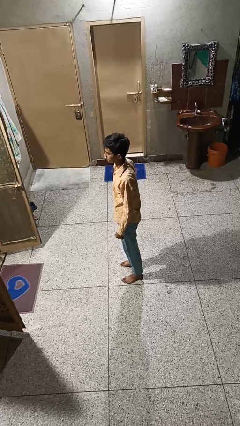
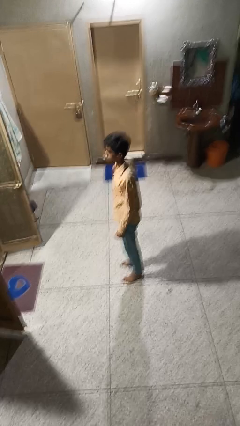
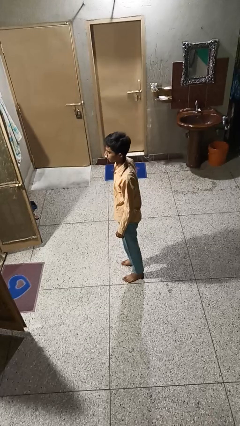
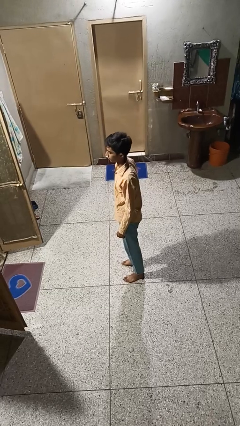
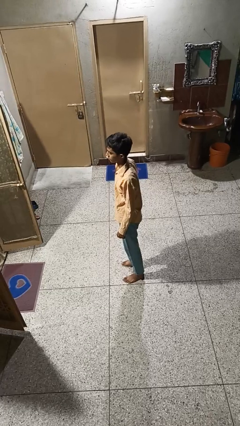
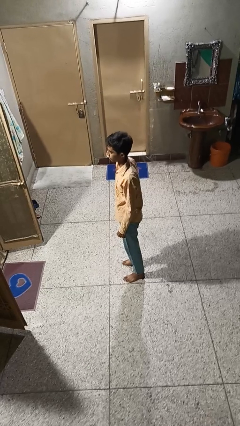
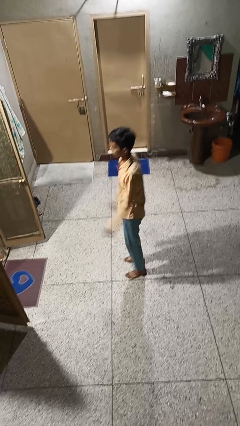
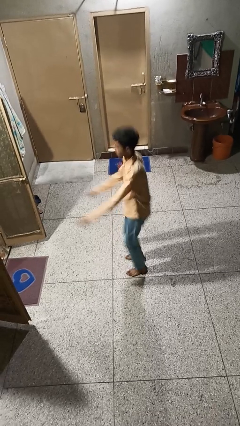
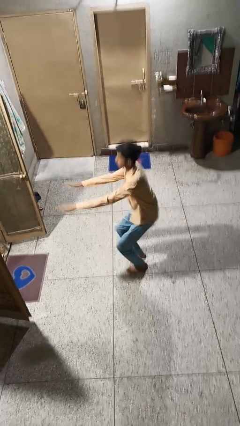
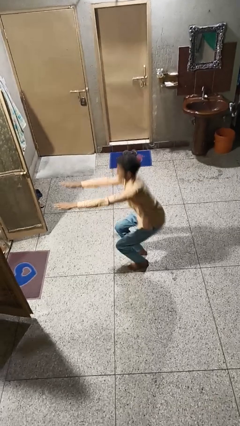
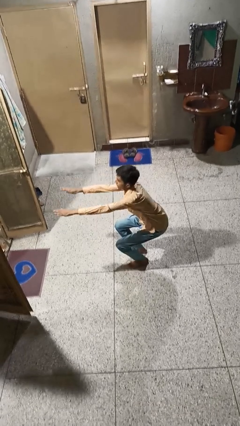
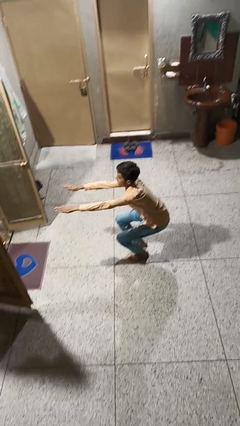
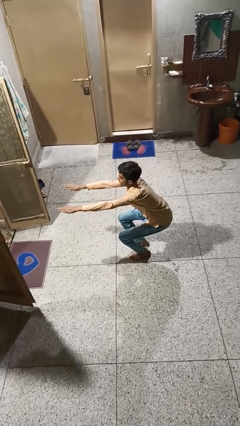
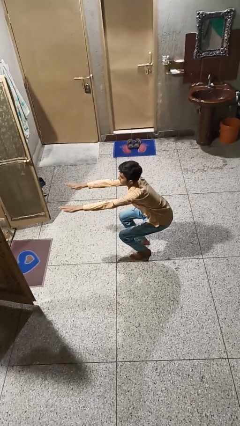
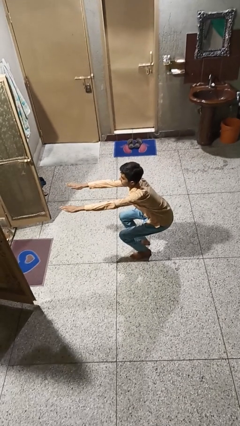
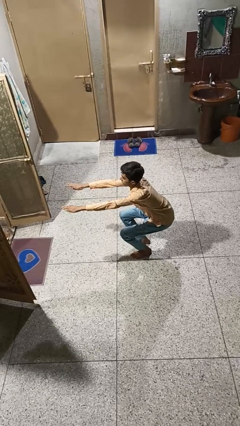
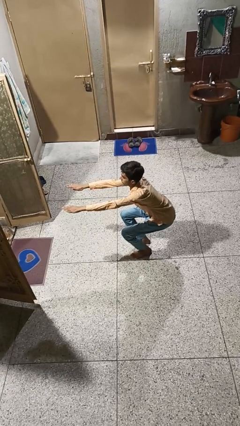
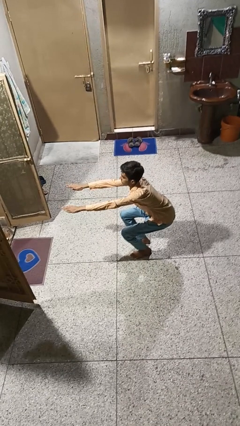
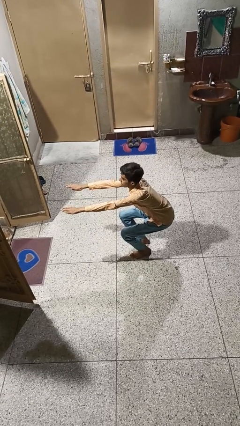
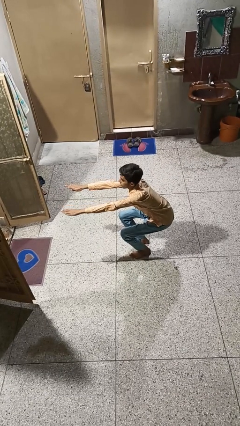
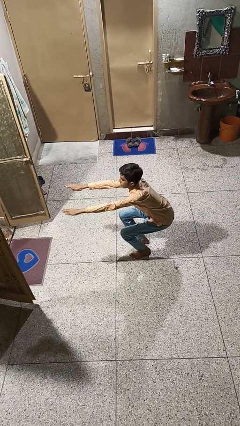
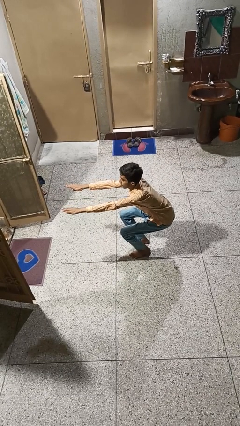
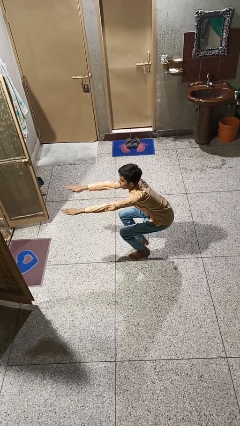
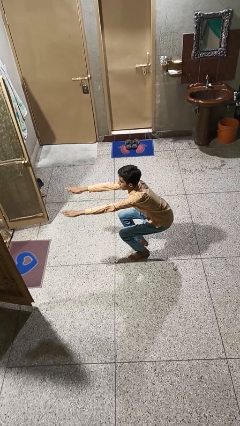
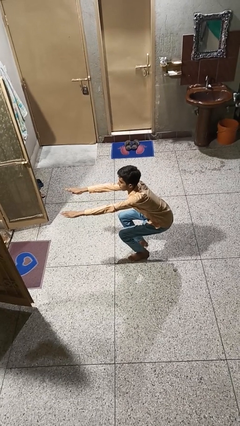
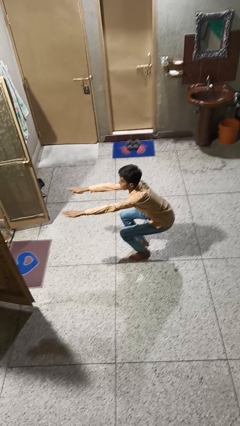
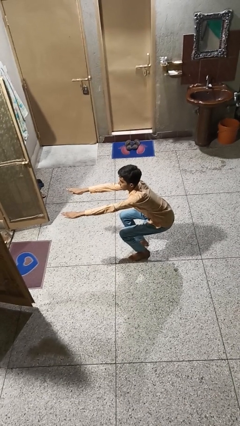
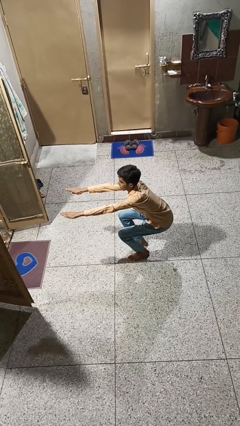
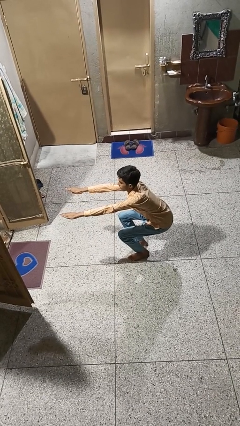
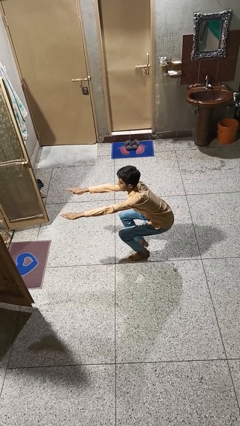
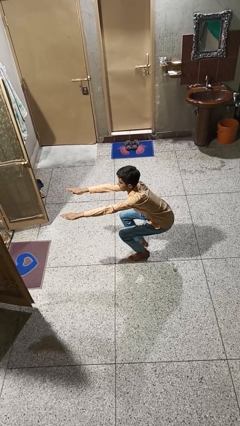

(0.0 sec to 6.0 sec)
person squats

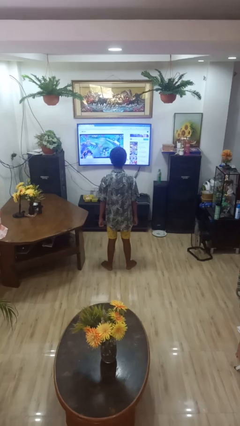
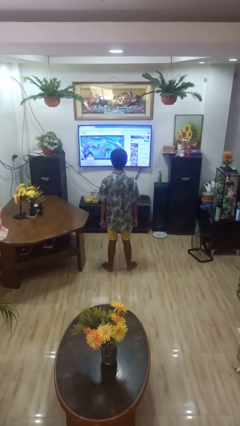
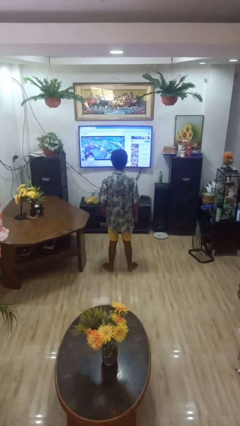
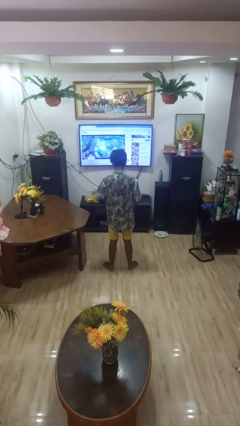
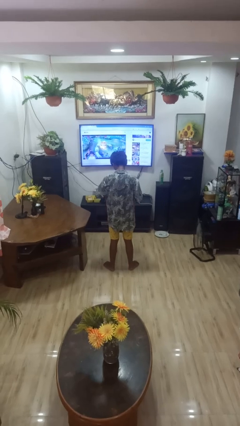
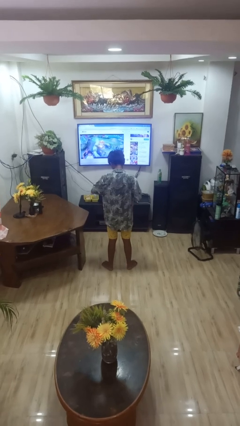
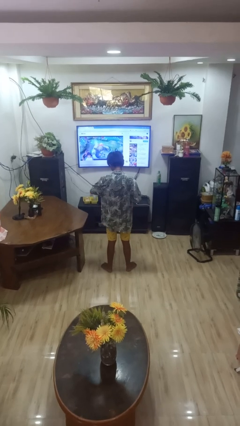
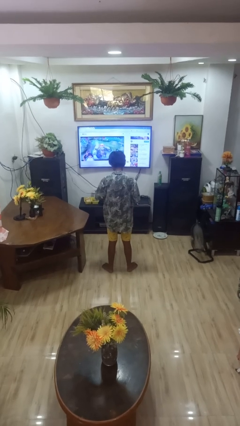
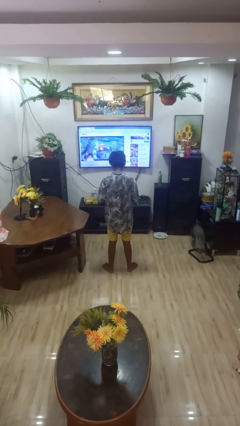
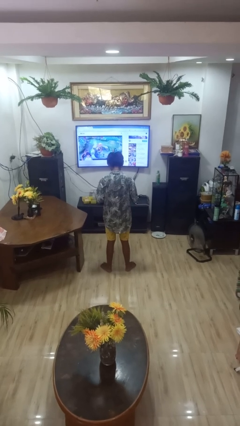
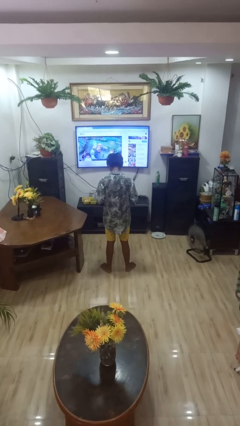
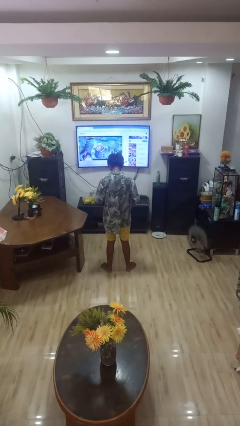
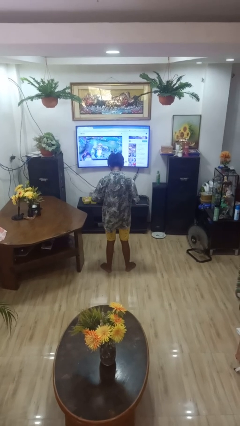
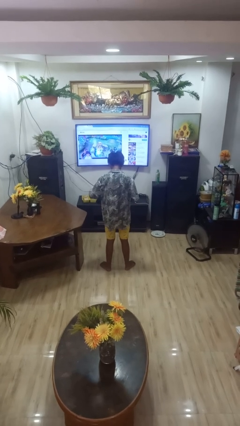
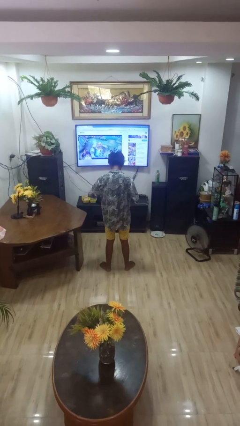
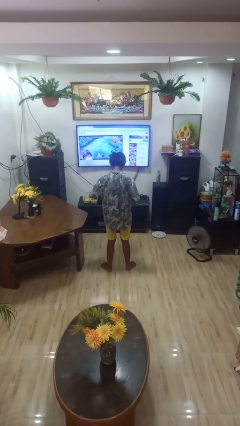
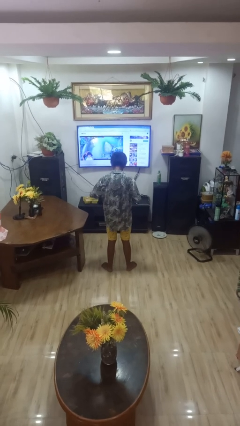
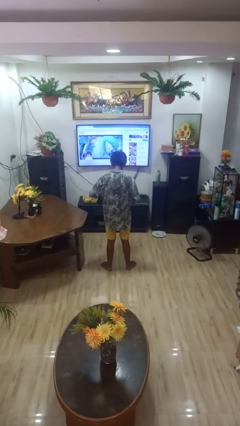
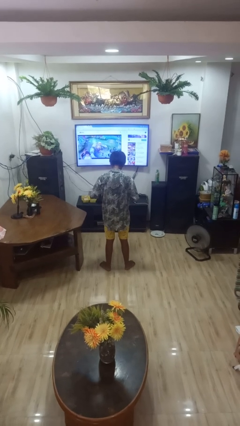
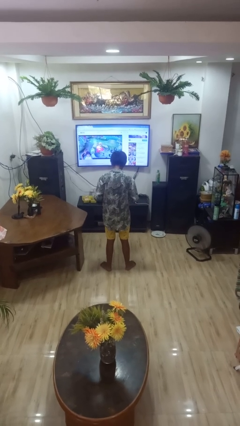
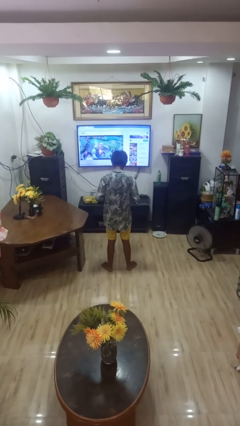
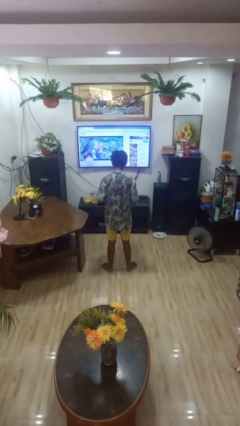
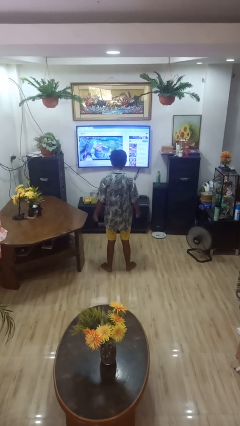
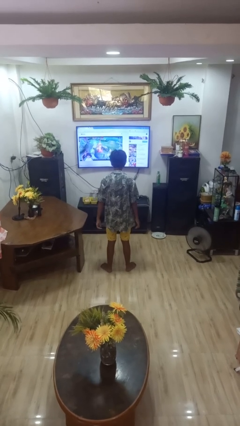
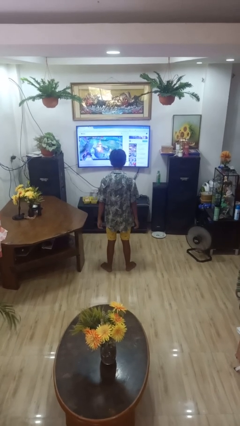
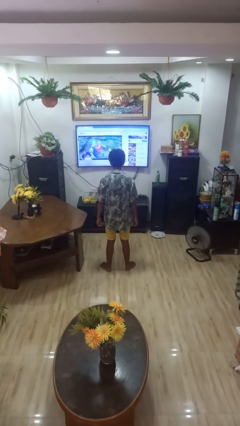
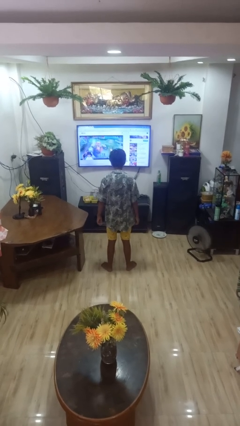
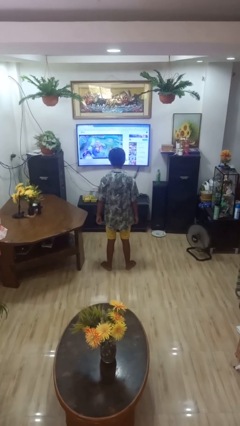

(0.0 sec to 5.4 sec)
person unbuttons shirt

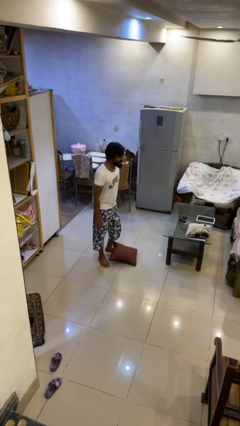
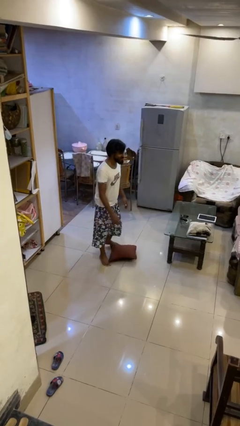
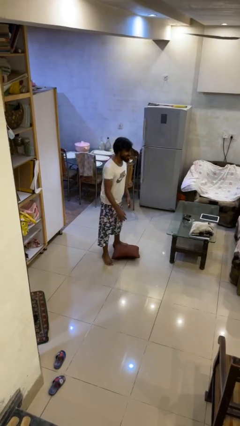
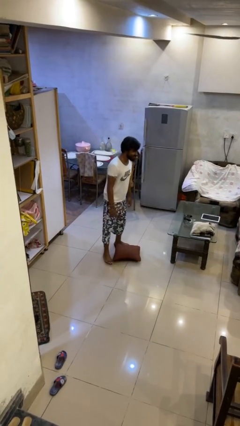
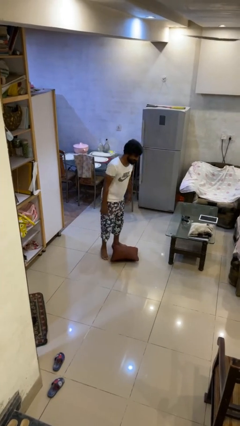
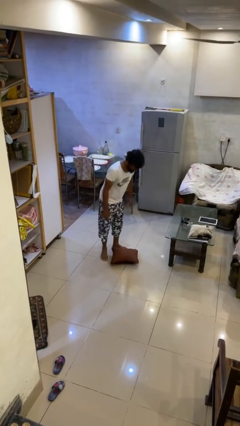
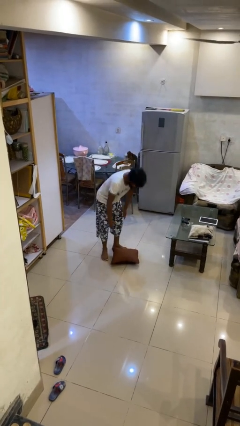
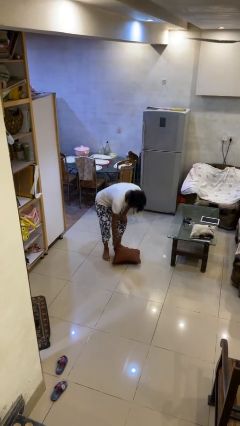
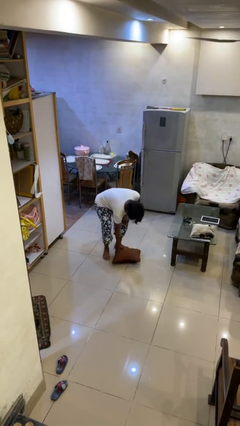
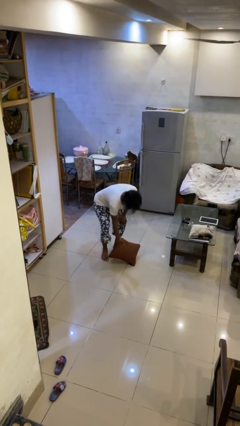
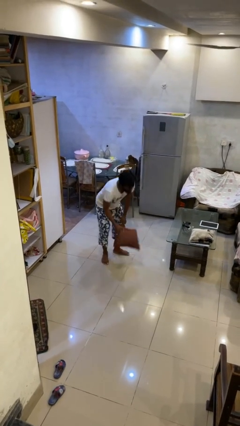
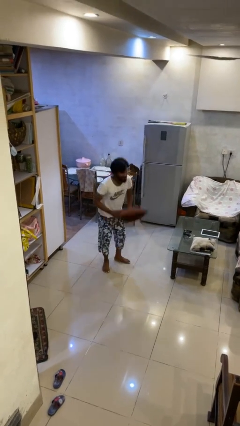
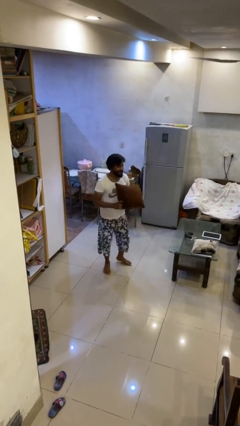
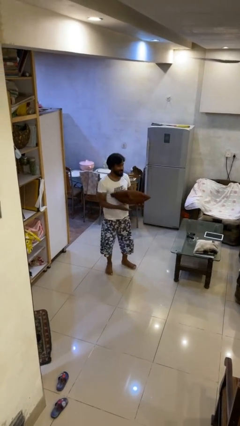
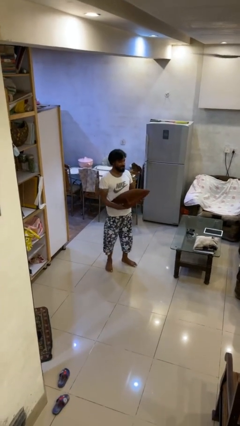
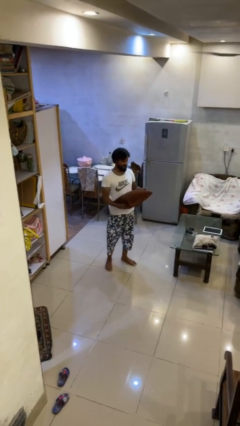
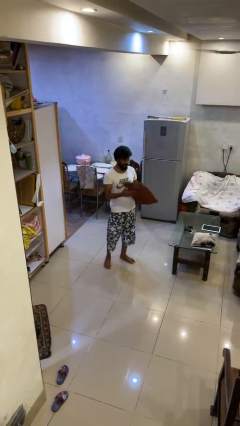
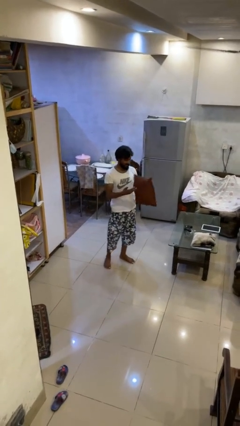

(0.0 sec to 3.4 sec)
person picks up object from floor

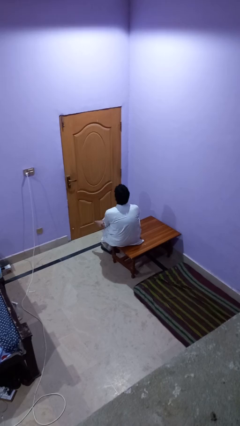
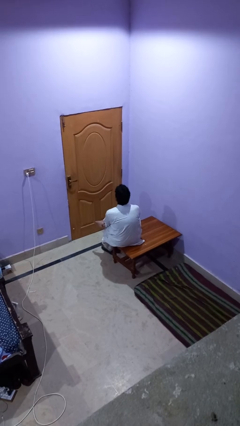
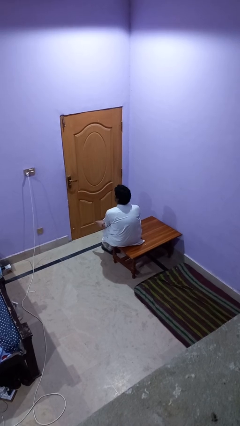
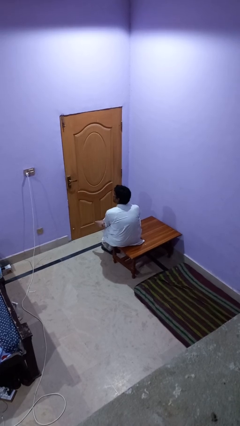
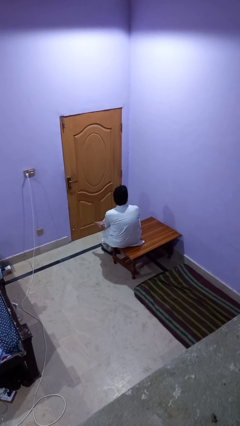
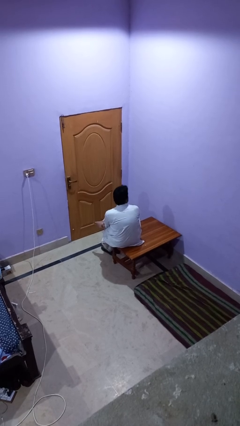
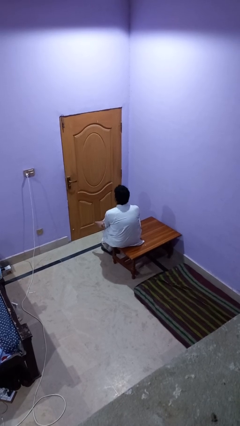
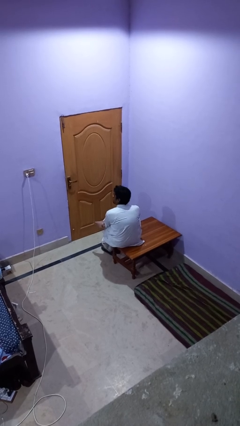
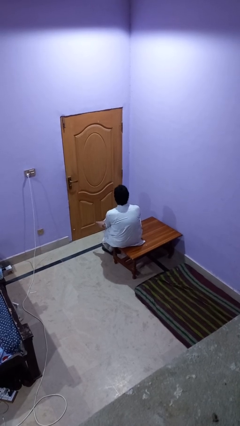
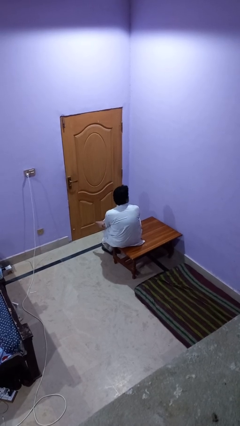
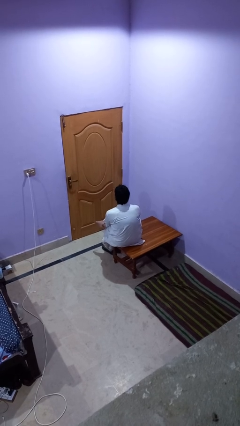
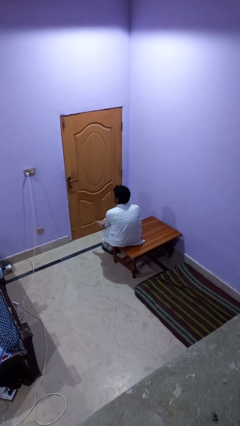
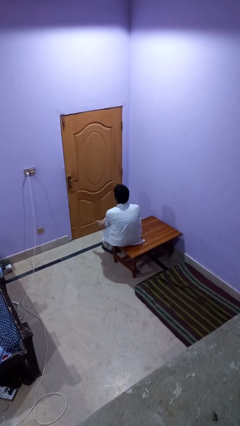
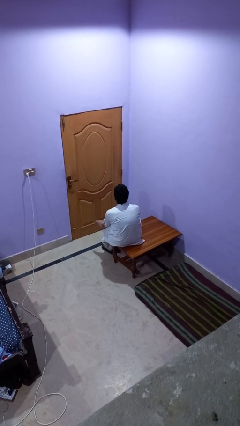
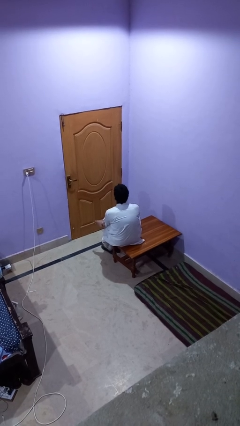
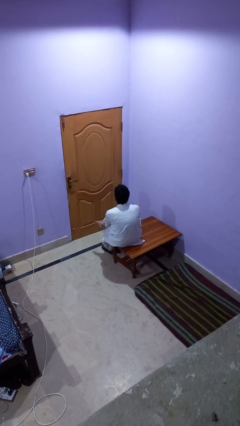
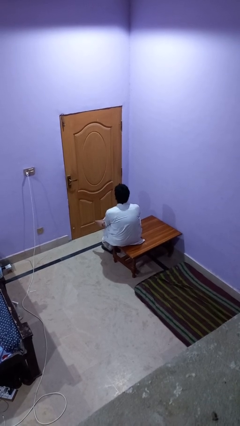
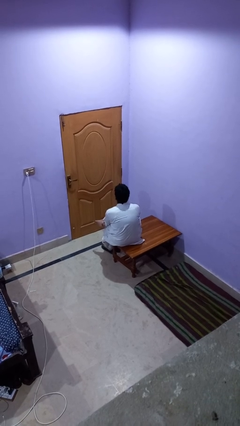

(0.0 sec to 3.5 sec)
person shakes head
